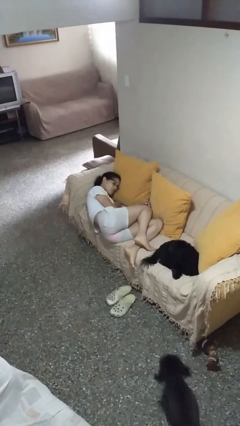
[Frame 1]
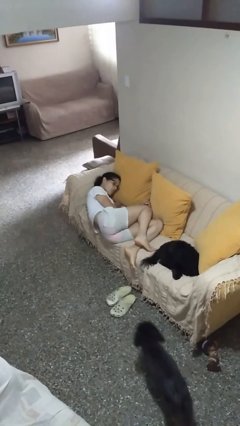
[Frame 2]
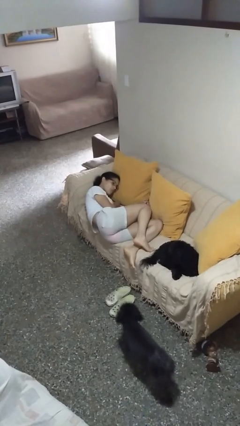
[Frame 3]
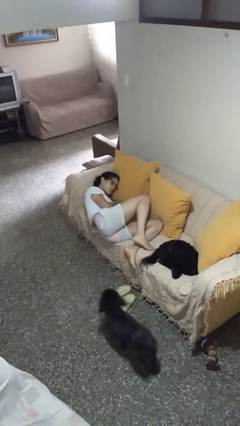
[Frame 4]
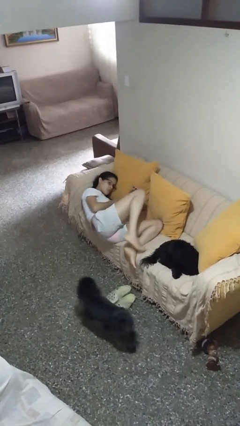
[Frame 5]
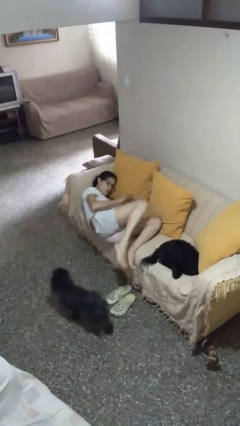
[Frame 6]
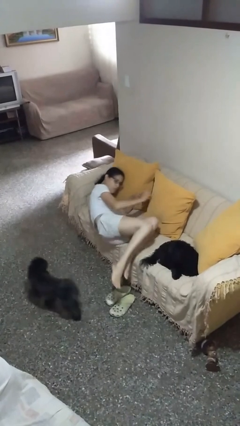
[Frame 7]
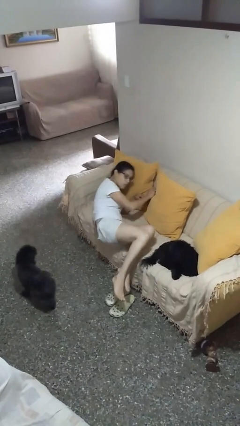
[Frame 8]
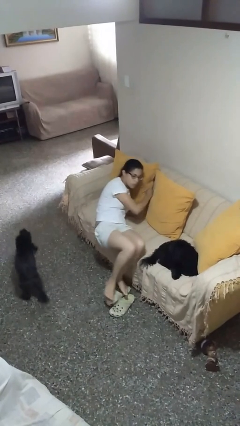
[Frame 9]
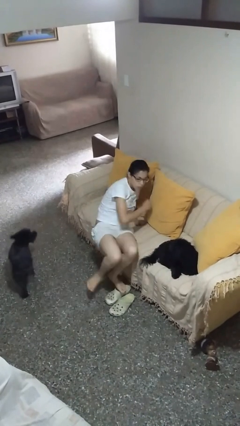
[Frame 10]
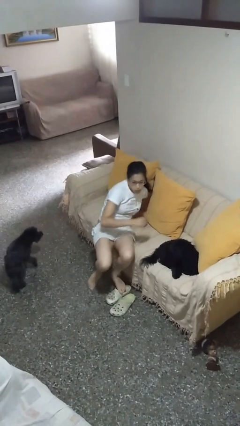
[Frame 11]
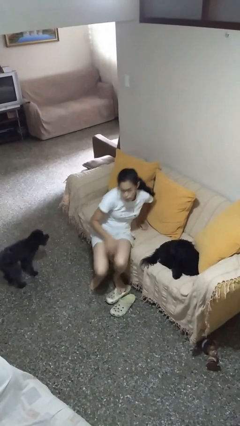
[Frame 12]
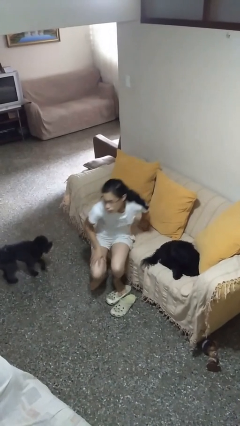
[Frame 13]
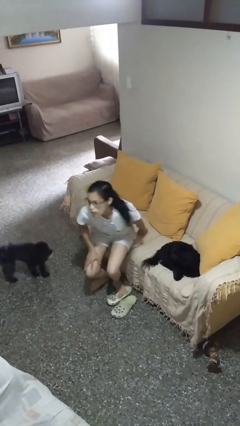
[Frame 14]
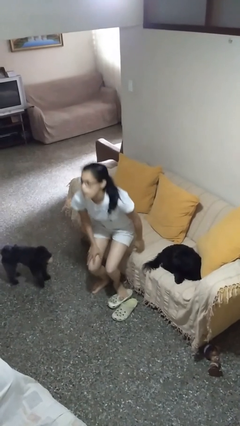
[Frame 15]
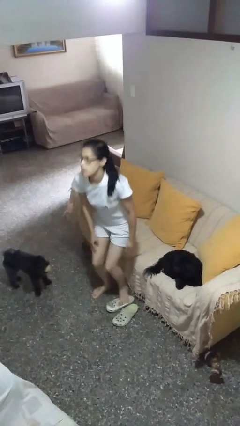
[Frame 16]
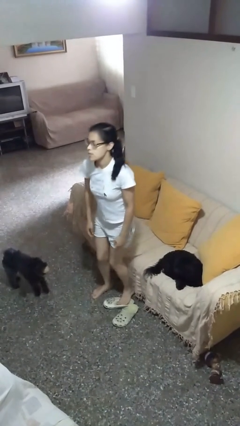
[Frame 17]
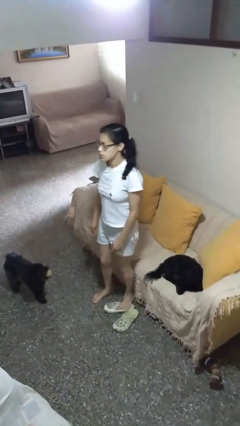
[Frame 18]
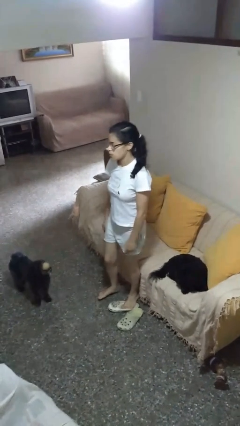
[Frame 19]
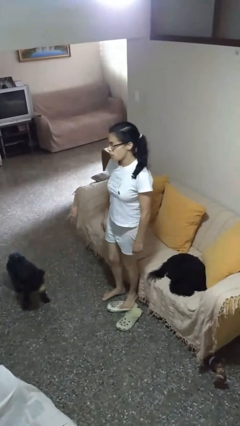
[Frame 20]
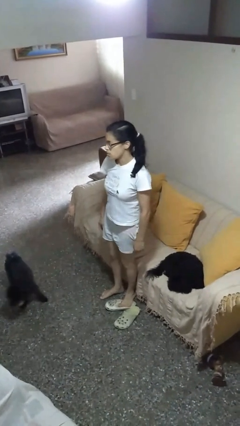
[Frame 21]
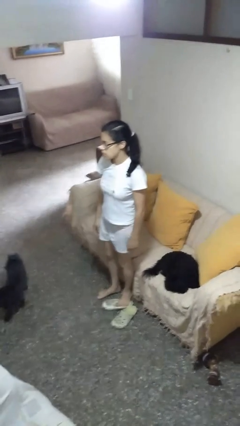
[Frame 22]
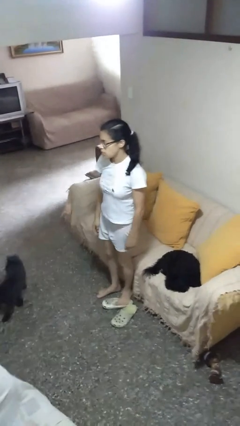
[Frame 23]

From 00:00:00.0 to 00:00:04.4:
person stands up

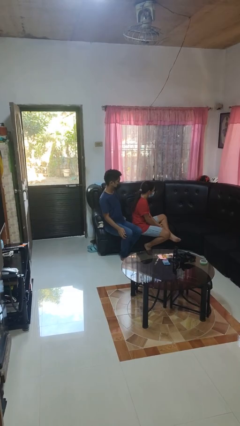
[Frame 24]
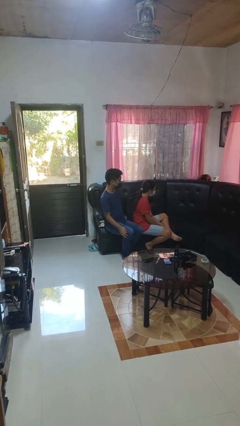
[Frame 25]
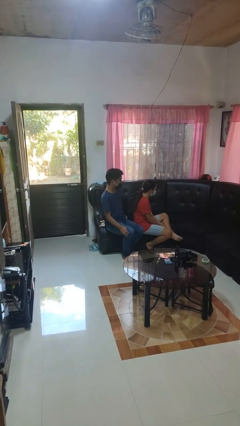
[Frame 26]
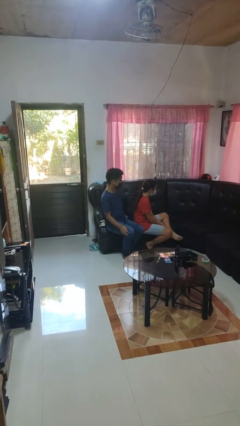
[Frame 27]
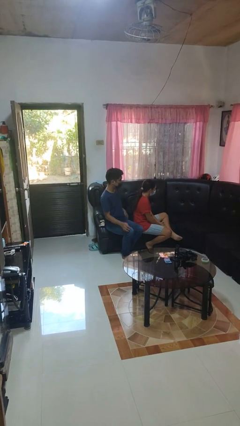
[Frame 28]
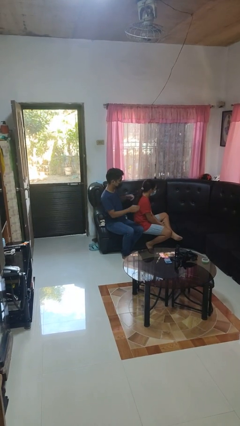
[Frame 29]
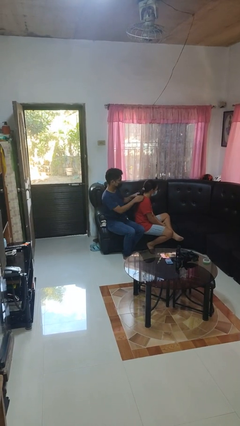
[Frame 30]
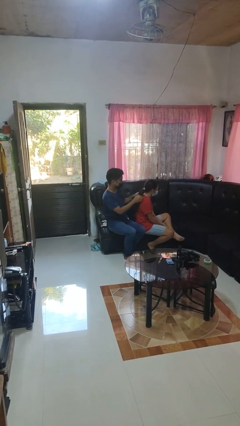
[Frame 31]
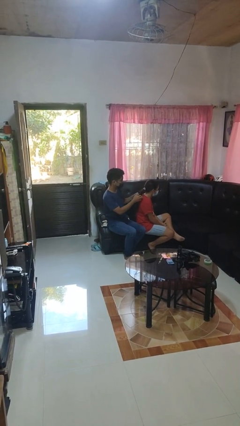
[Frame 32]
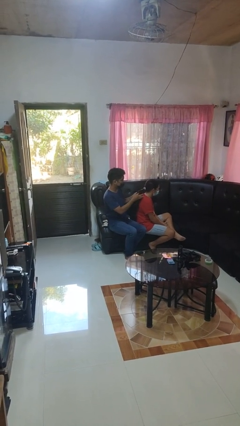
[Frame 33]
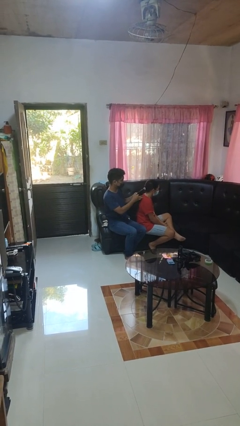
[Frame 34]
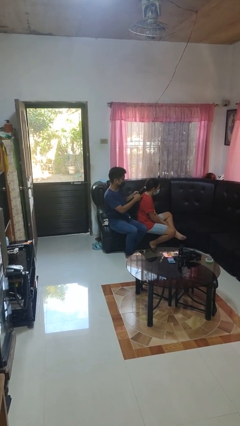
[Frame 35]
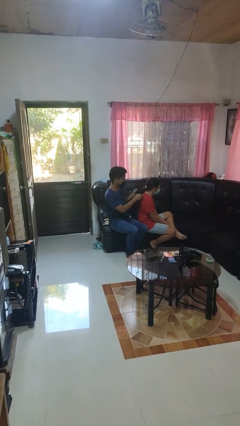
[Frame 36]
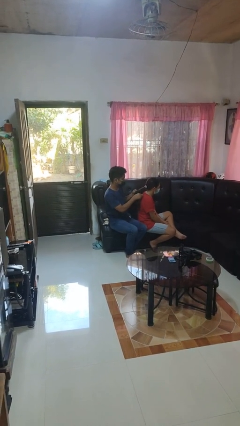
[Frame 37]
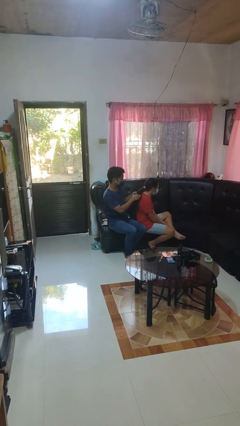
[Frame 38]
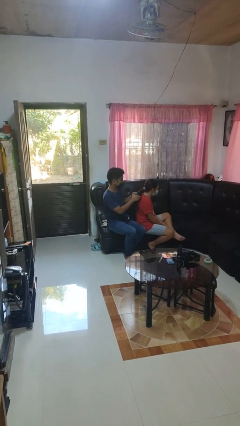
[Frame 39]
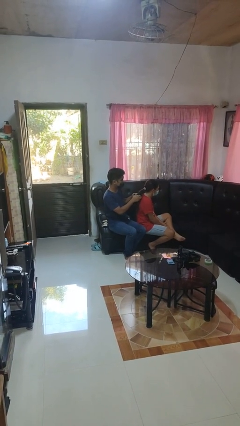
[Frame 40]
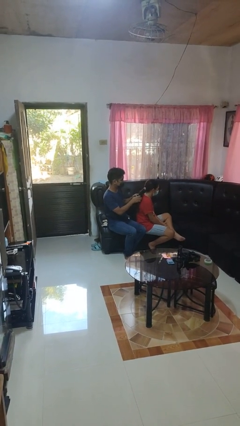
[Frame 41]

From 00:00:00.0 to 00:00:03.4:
person braids hair of person

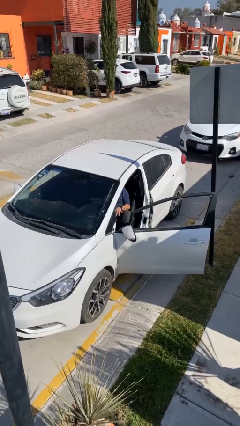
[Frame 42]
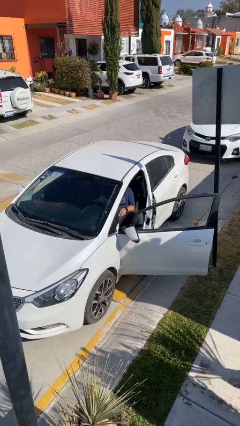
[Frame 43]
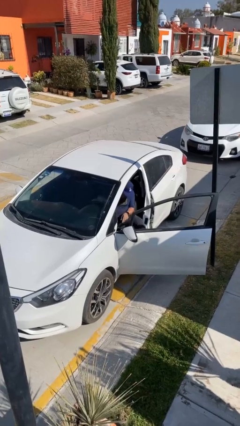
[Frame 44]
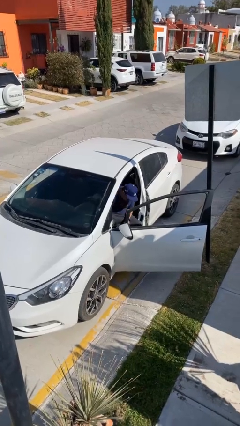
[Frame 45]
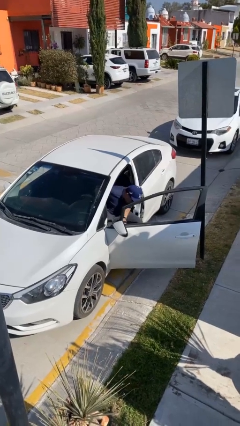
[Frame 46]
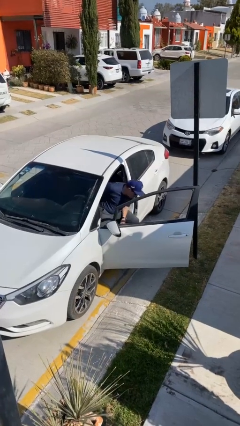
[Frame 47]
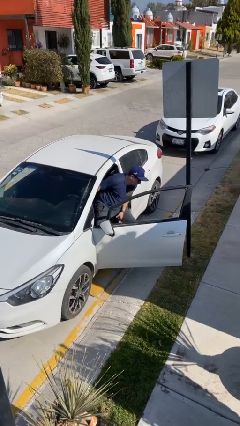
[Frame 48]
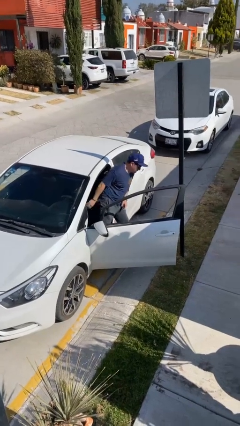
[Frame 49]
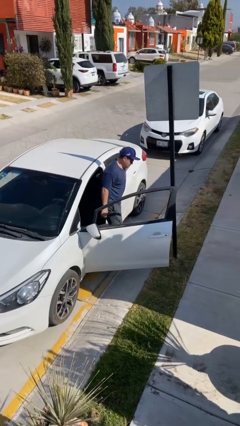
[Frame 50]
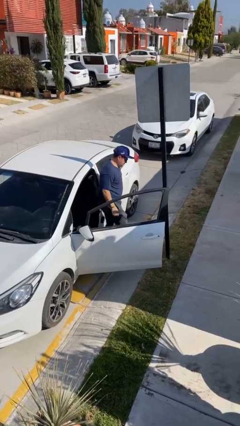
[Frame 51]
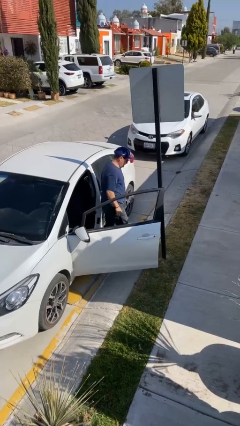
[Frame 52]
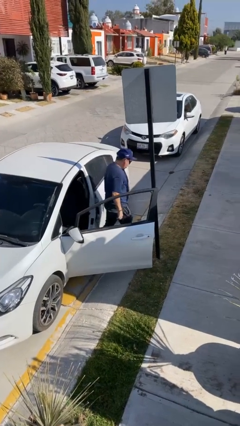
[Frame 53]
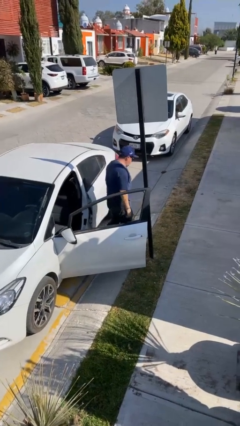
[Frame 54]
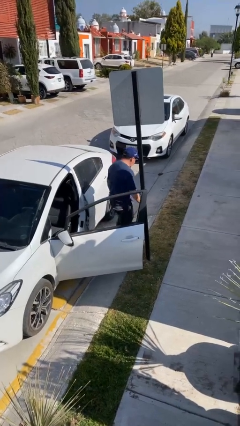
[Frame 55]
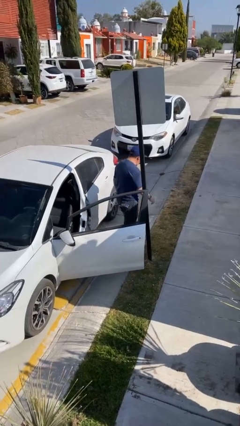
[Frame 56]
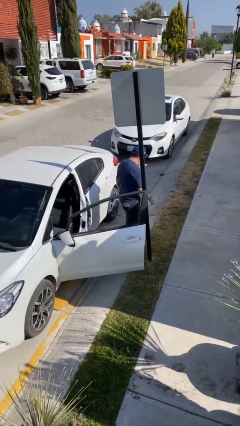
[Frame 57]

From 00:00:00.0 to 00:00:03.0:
person exits car

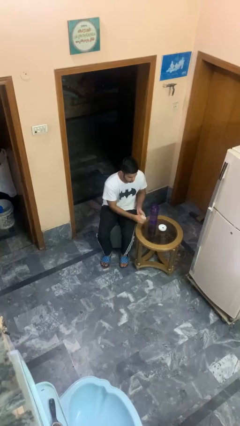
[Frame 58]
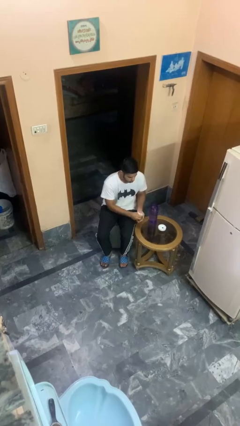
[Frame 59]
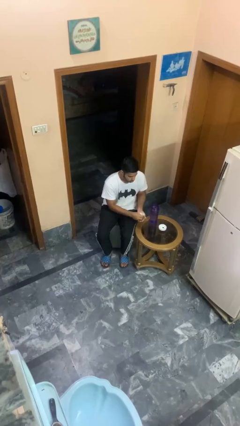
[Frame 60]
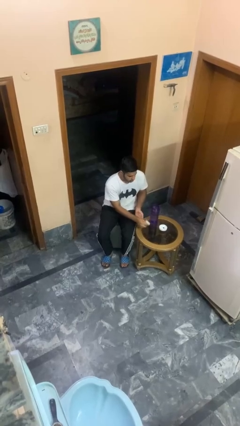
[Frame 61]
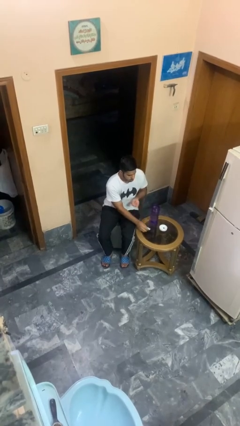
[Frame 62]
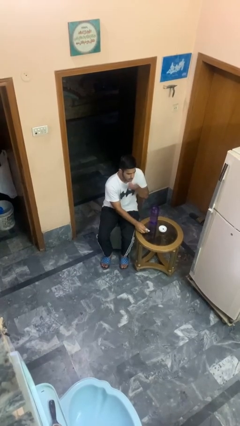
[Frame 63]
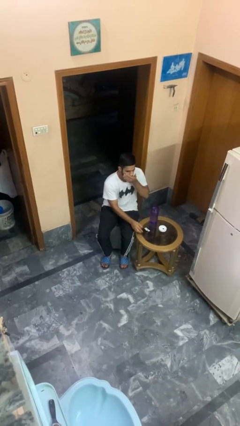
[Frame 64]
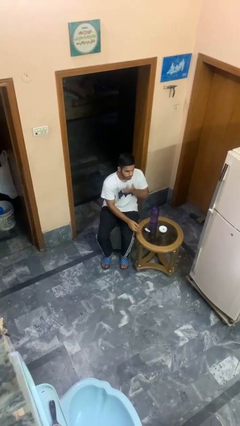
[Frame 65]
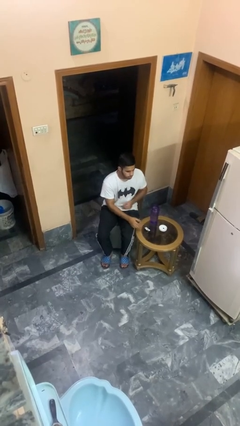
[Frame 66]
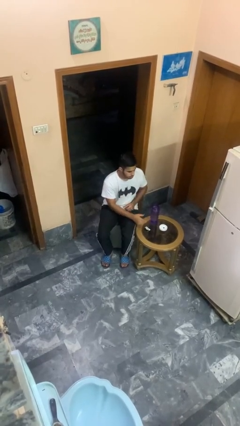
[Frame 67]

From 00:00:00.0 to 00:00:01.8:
person takes medicine pills

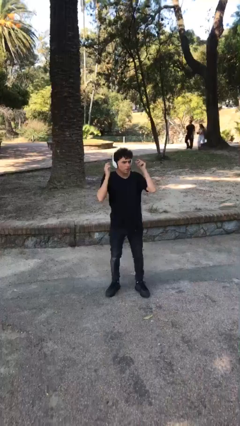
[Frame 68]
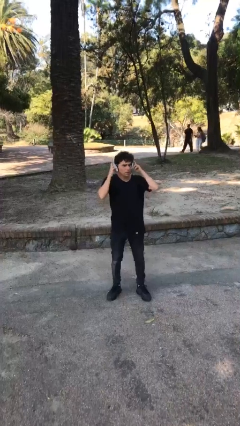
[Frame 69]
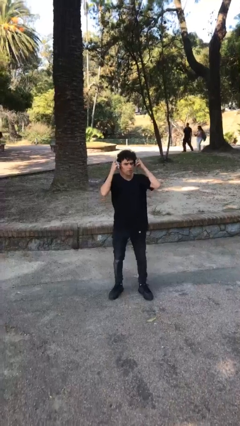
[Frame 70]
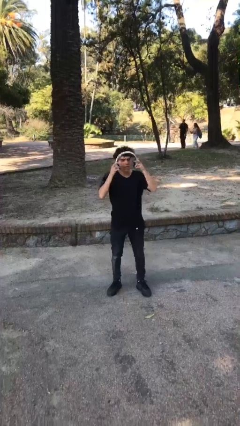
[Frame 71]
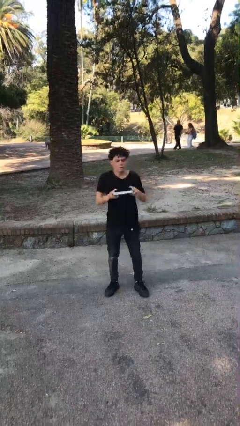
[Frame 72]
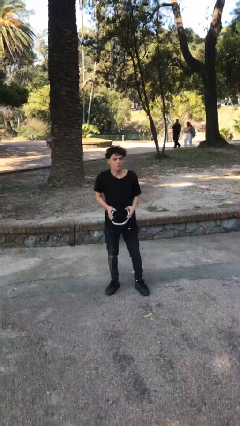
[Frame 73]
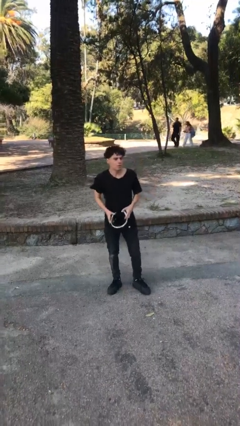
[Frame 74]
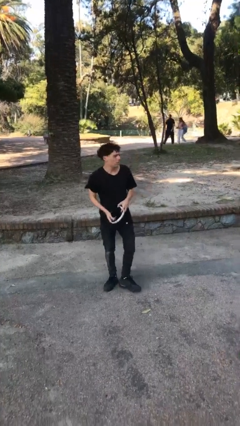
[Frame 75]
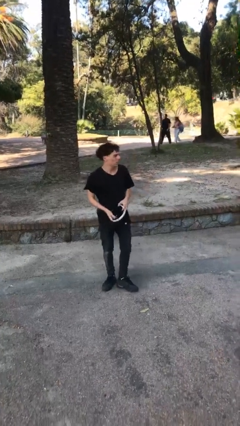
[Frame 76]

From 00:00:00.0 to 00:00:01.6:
person takes off headphones

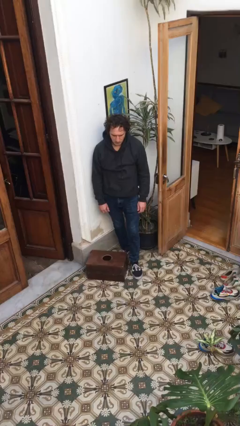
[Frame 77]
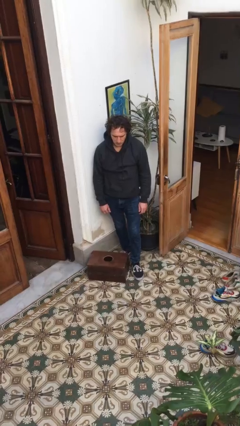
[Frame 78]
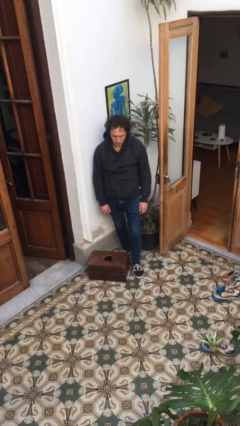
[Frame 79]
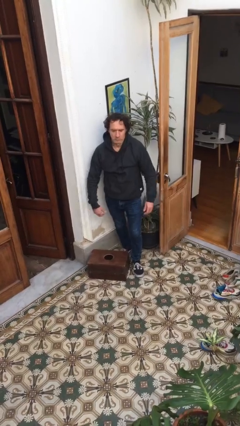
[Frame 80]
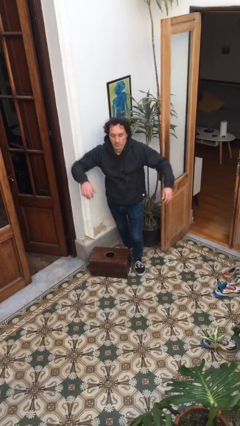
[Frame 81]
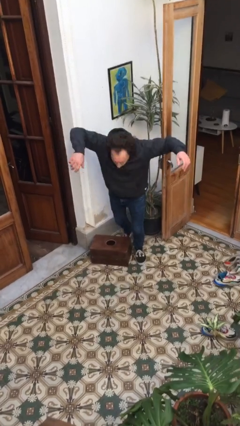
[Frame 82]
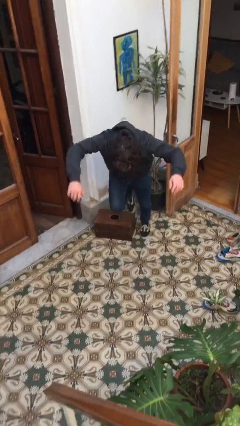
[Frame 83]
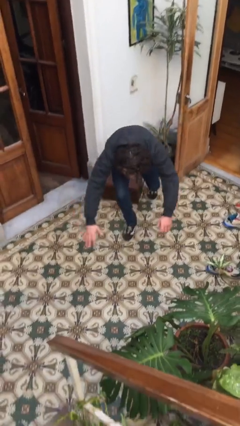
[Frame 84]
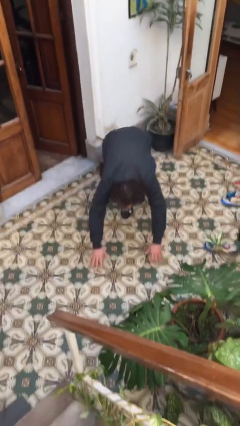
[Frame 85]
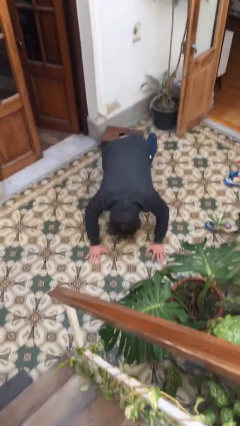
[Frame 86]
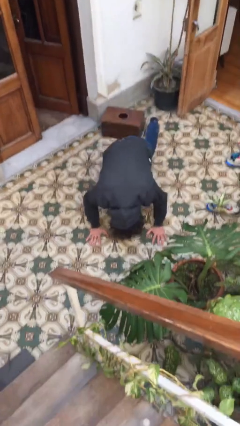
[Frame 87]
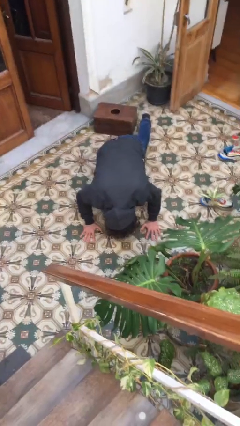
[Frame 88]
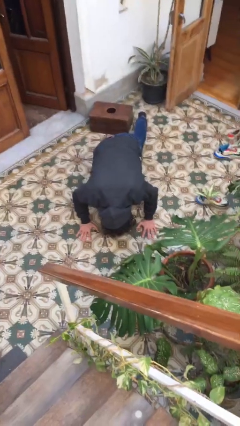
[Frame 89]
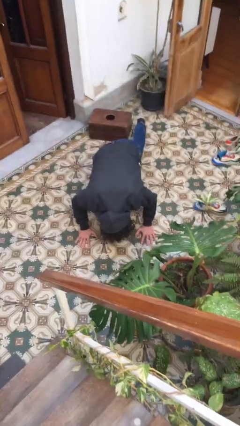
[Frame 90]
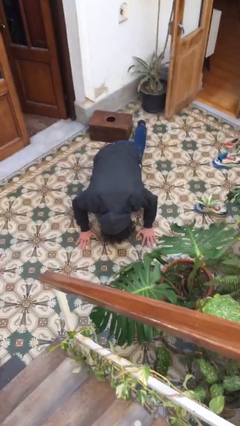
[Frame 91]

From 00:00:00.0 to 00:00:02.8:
person trips on object on floor
